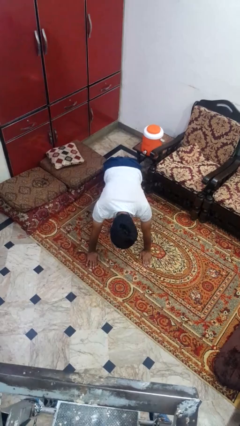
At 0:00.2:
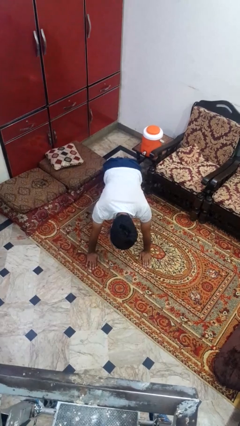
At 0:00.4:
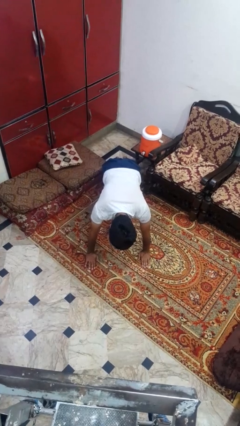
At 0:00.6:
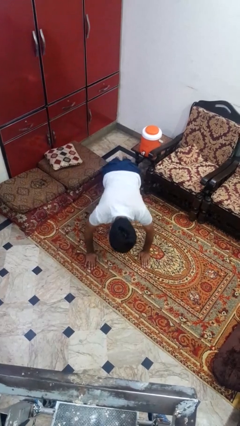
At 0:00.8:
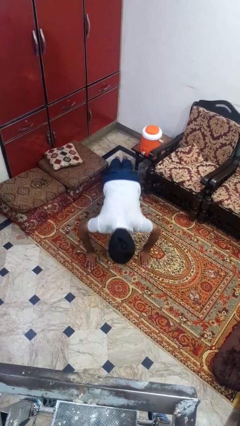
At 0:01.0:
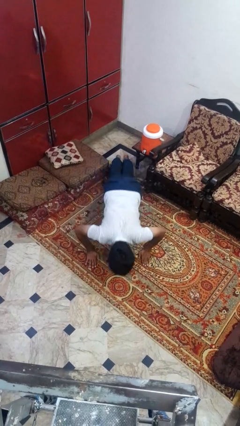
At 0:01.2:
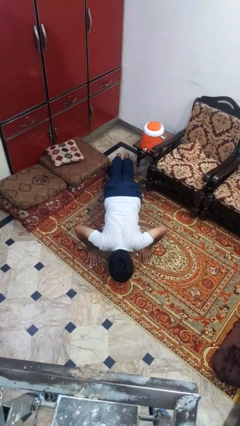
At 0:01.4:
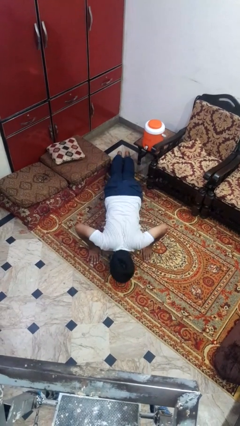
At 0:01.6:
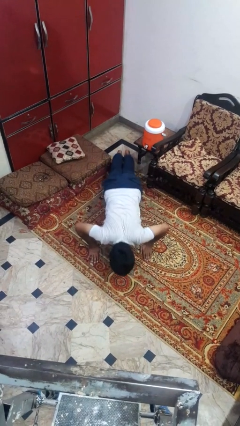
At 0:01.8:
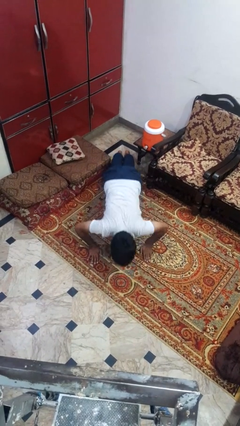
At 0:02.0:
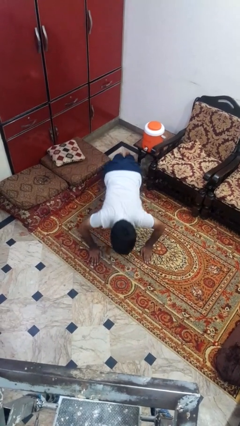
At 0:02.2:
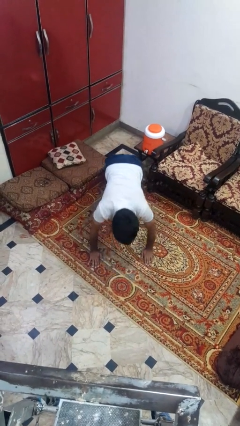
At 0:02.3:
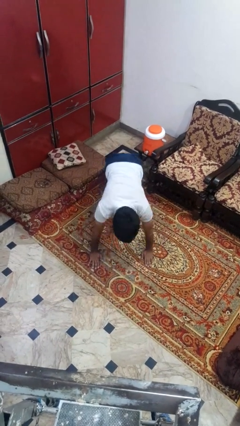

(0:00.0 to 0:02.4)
person exercises with pushup

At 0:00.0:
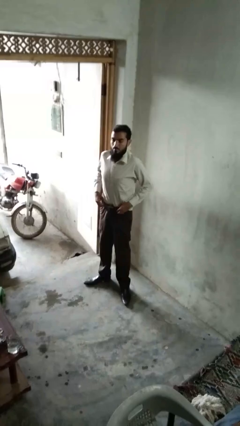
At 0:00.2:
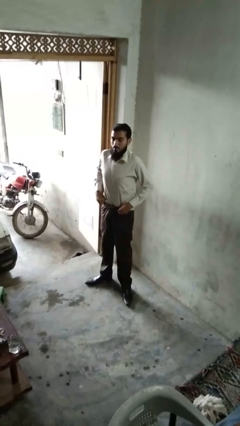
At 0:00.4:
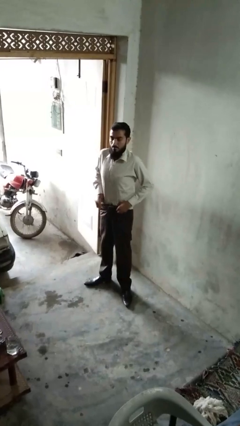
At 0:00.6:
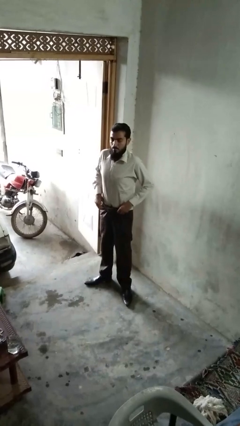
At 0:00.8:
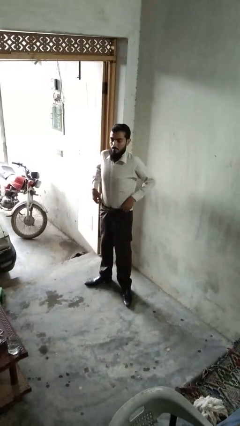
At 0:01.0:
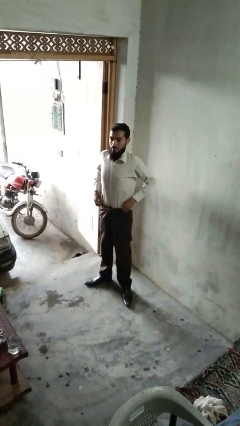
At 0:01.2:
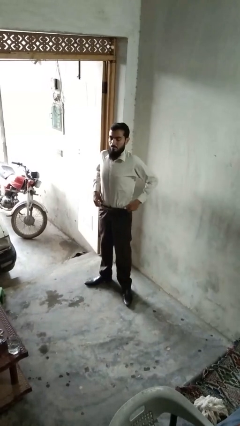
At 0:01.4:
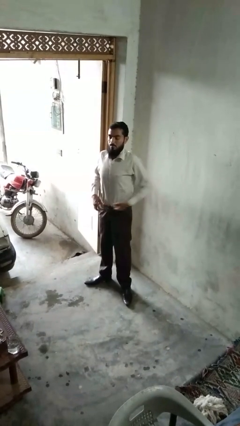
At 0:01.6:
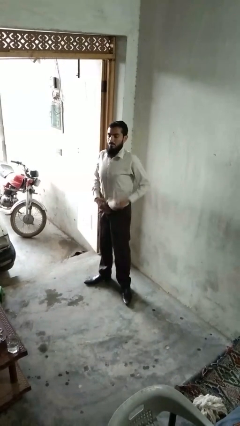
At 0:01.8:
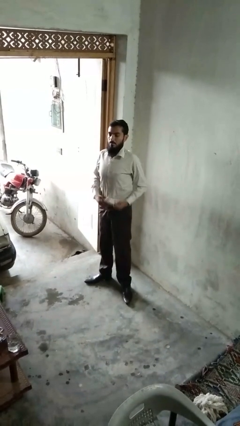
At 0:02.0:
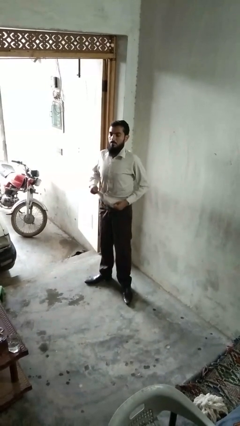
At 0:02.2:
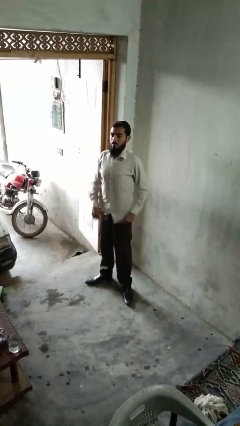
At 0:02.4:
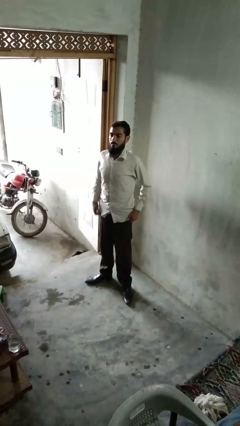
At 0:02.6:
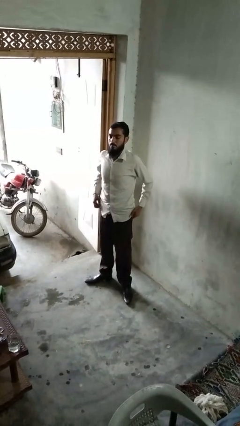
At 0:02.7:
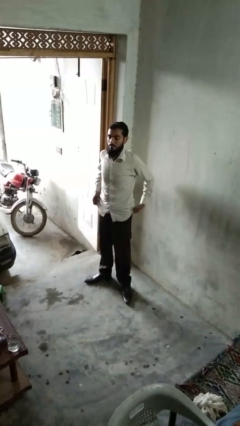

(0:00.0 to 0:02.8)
person untucks shirt

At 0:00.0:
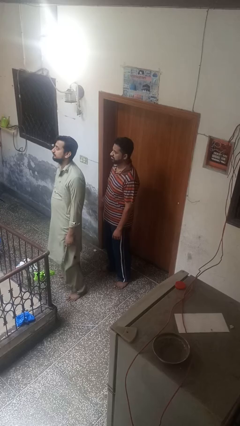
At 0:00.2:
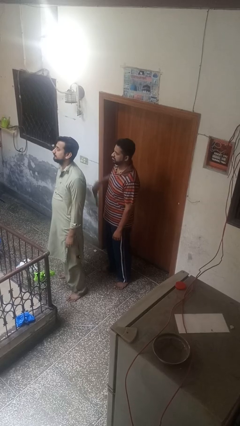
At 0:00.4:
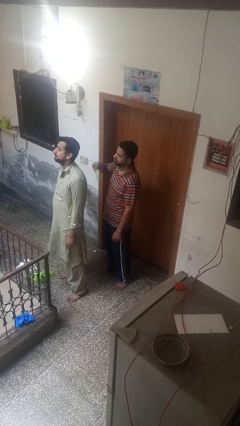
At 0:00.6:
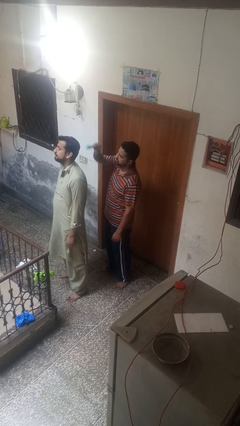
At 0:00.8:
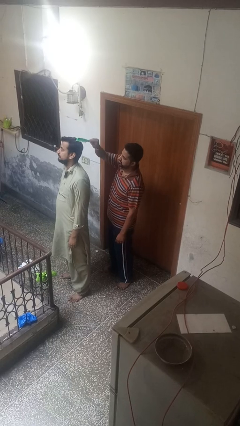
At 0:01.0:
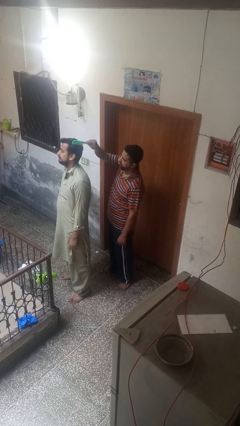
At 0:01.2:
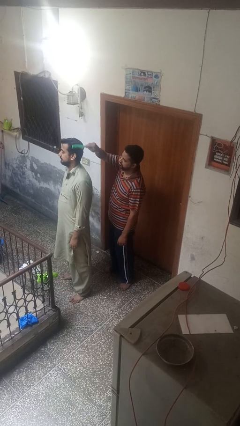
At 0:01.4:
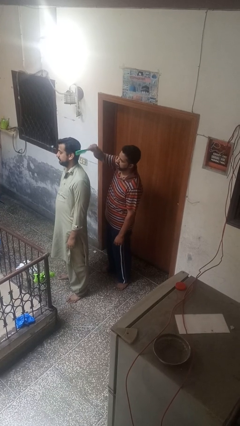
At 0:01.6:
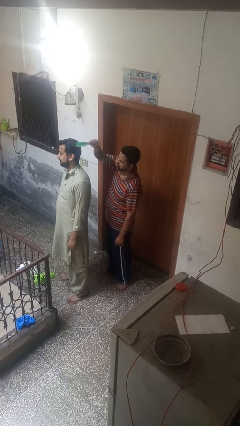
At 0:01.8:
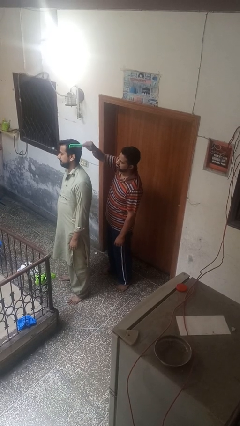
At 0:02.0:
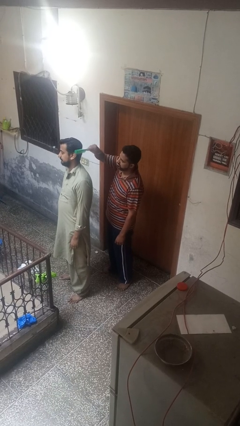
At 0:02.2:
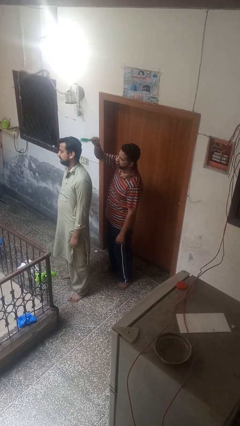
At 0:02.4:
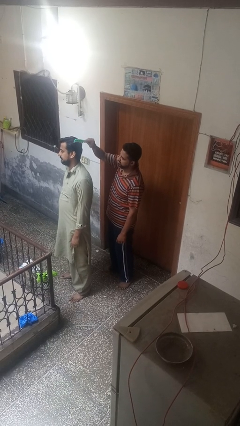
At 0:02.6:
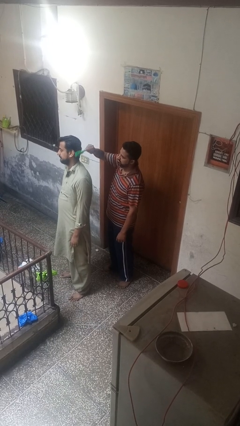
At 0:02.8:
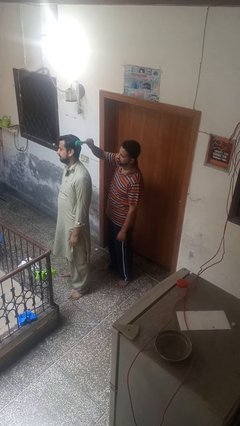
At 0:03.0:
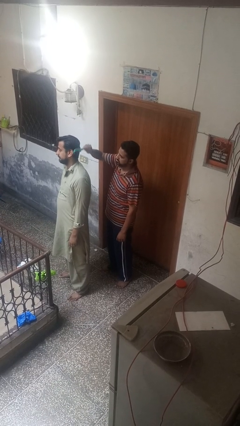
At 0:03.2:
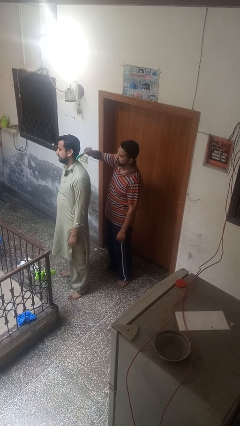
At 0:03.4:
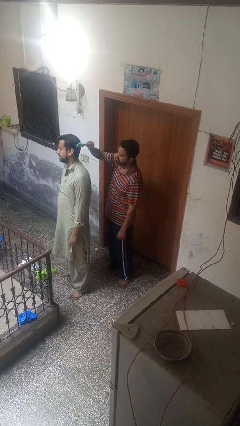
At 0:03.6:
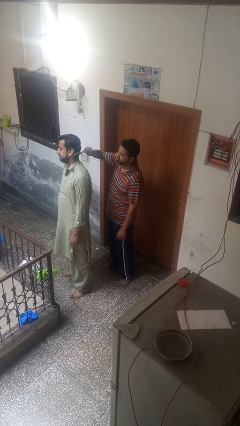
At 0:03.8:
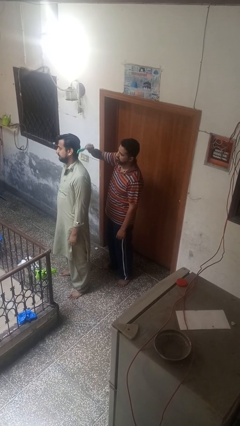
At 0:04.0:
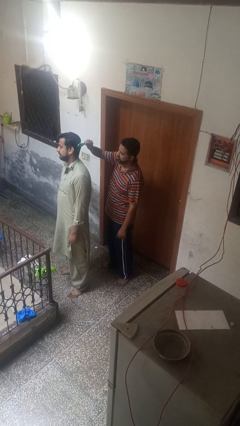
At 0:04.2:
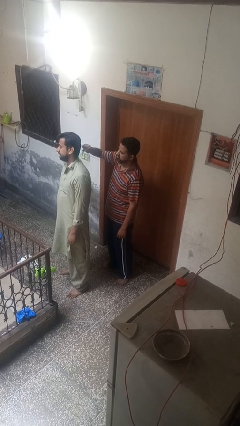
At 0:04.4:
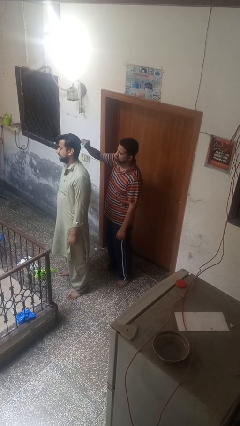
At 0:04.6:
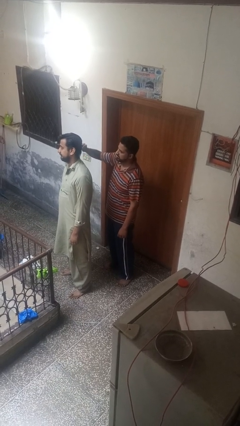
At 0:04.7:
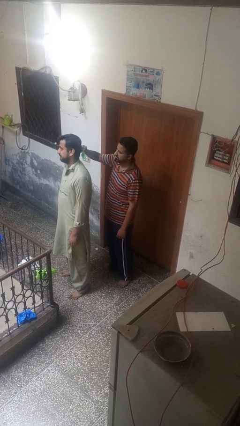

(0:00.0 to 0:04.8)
person brushes hair of person

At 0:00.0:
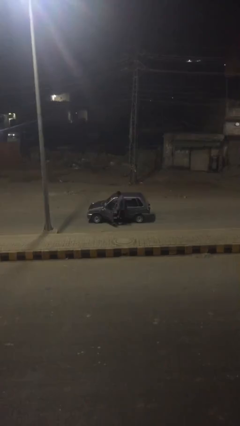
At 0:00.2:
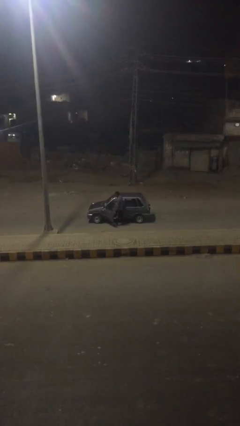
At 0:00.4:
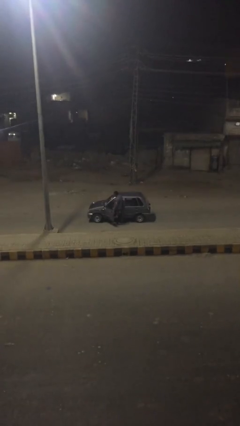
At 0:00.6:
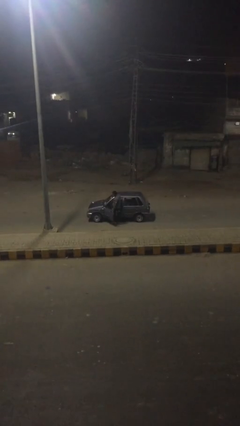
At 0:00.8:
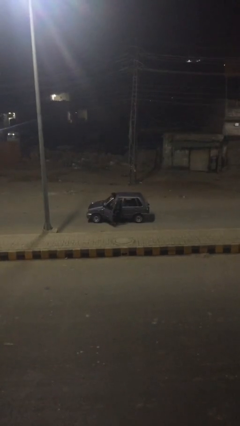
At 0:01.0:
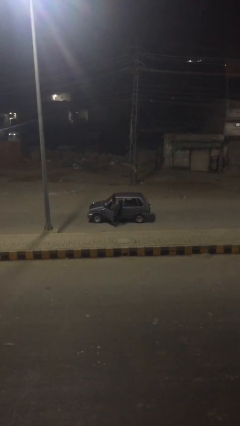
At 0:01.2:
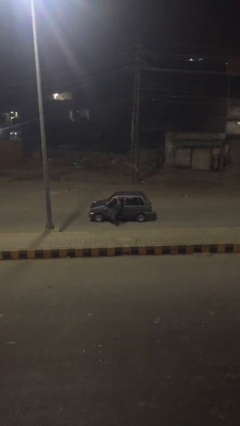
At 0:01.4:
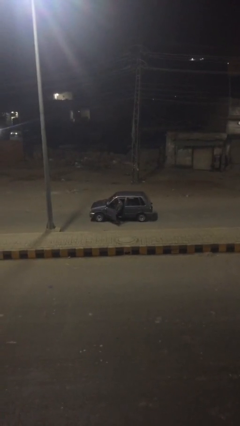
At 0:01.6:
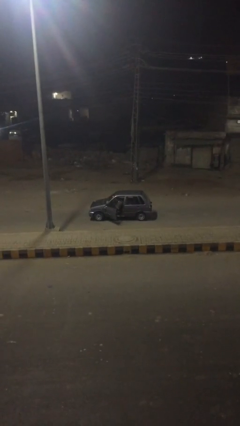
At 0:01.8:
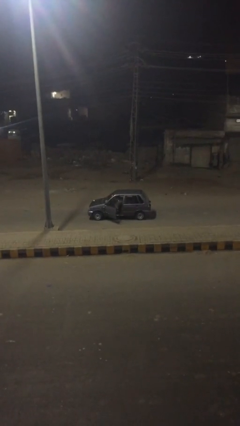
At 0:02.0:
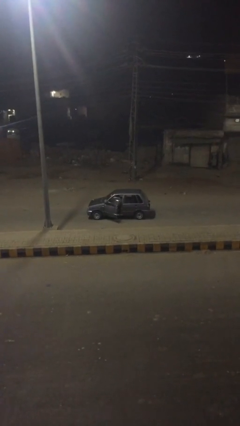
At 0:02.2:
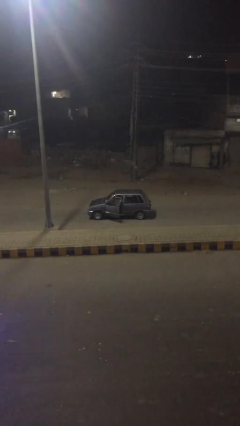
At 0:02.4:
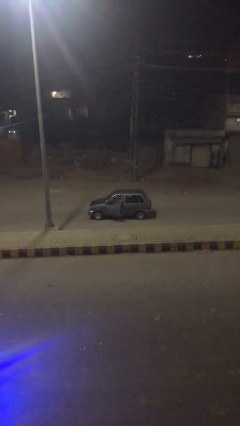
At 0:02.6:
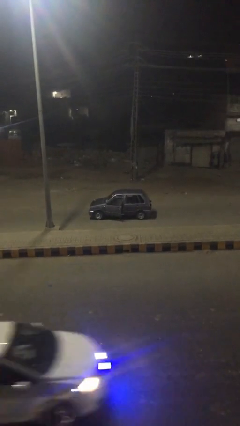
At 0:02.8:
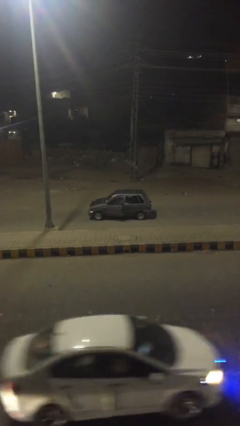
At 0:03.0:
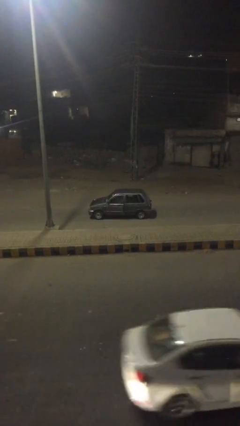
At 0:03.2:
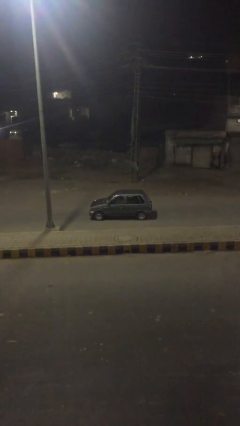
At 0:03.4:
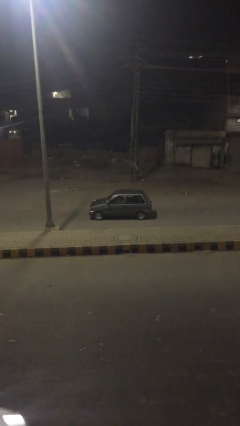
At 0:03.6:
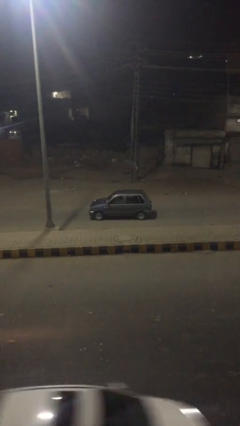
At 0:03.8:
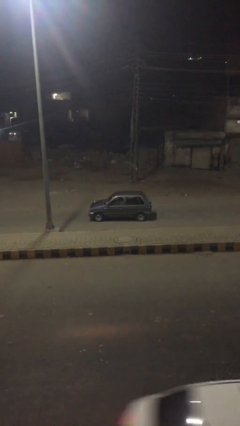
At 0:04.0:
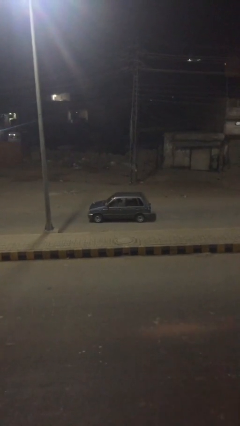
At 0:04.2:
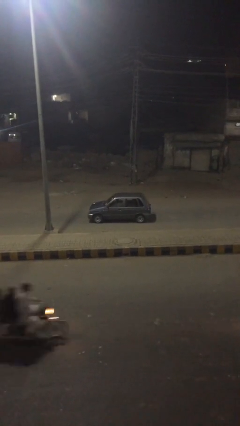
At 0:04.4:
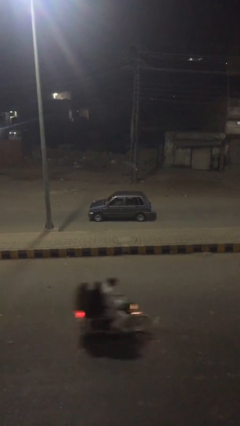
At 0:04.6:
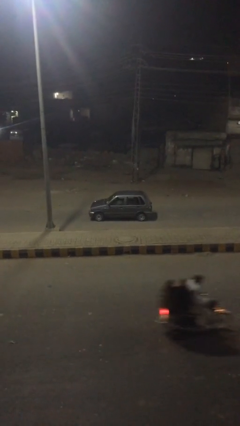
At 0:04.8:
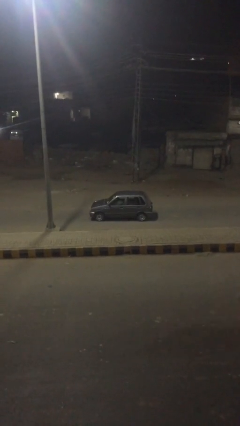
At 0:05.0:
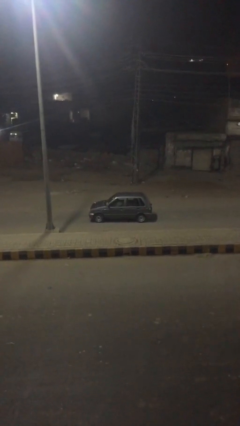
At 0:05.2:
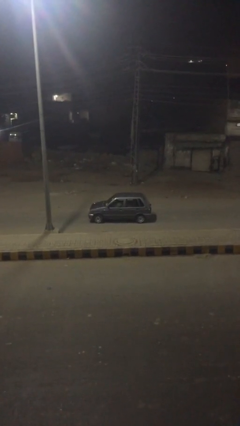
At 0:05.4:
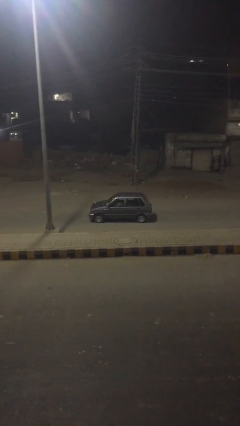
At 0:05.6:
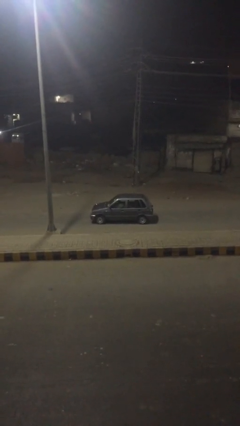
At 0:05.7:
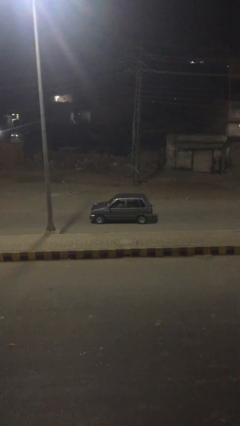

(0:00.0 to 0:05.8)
person enters car

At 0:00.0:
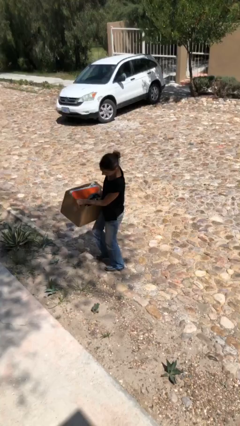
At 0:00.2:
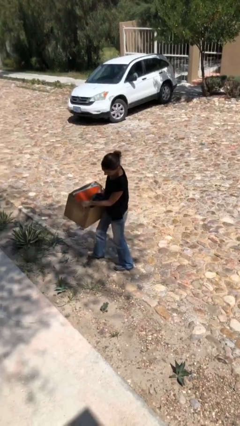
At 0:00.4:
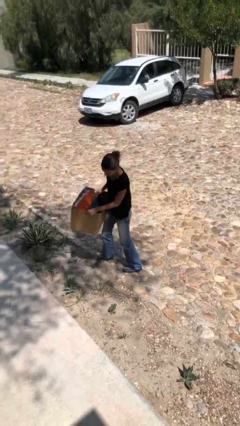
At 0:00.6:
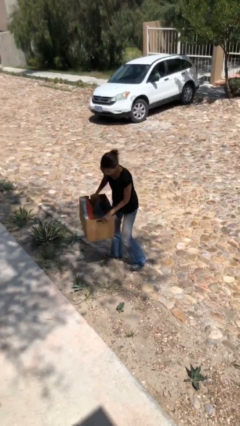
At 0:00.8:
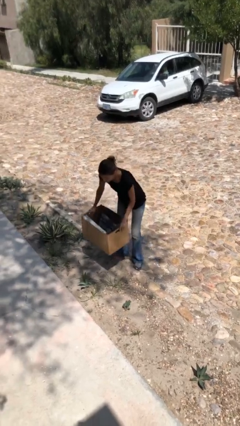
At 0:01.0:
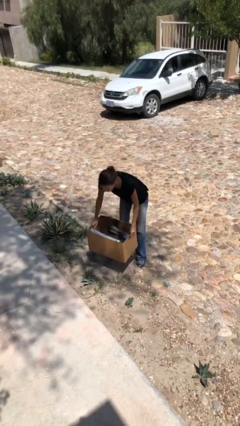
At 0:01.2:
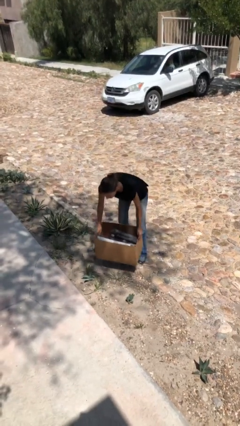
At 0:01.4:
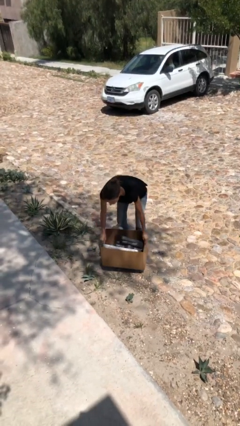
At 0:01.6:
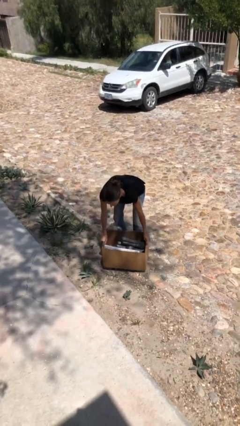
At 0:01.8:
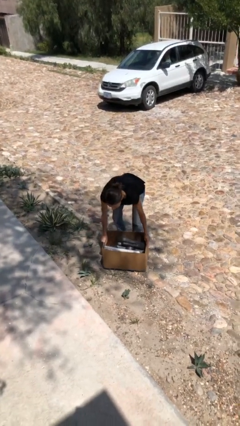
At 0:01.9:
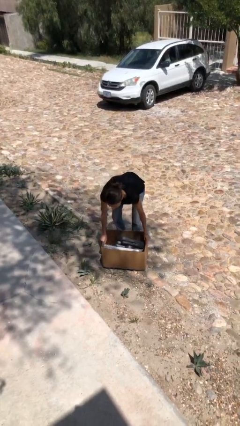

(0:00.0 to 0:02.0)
person puts down object on floor
